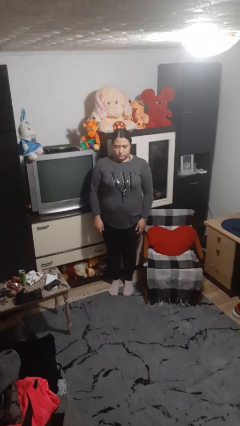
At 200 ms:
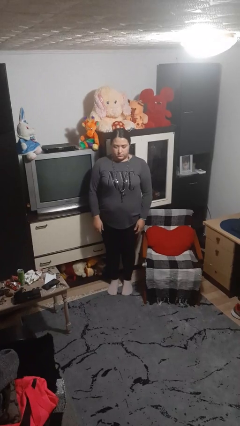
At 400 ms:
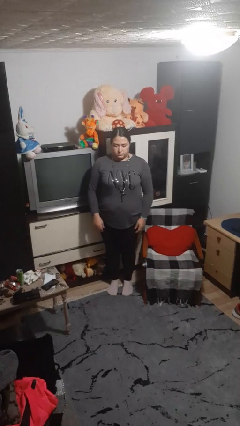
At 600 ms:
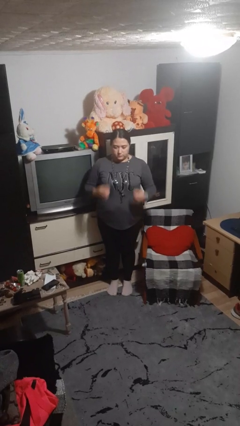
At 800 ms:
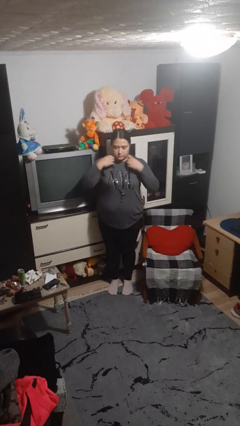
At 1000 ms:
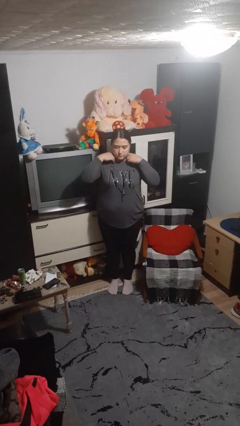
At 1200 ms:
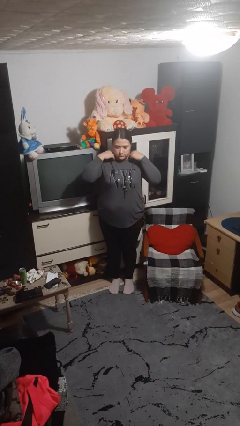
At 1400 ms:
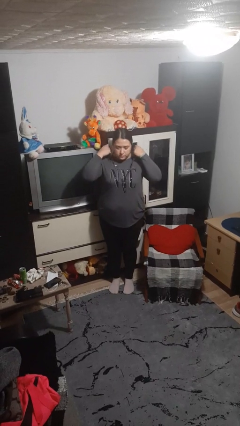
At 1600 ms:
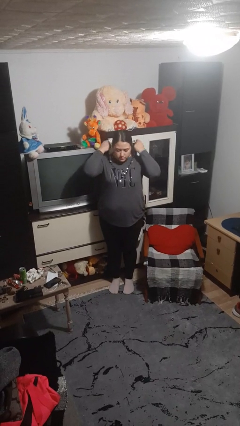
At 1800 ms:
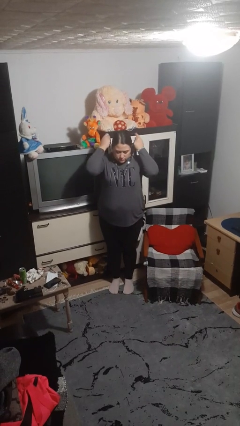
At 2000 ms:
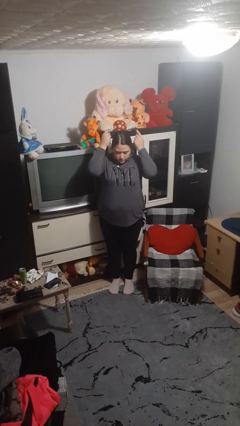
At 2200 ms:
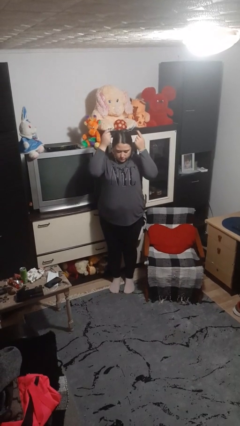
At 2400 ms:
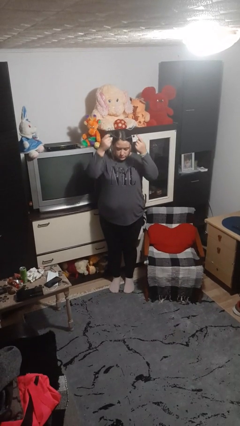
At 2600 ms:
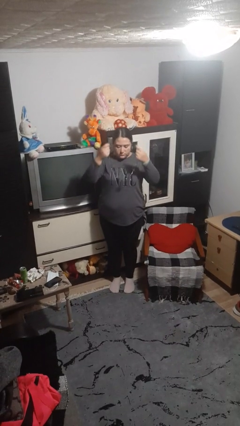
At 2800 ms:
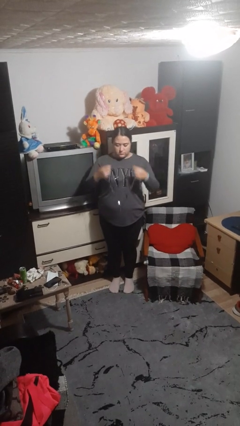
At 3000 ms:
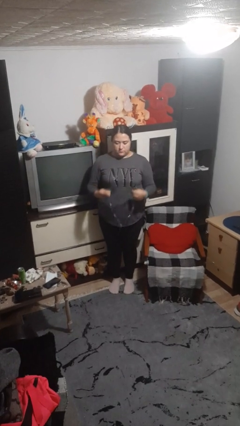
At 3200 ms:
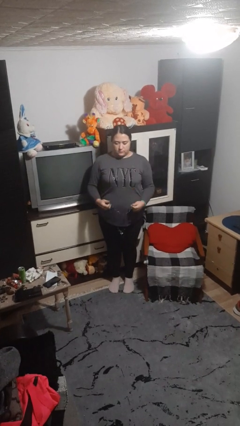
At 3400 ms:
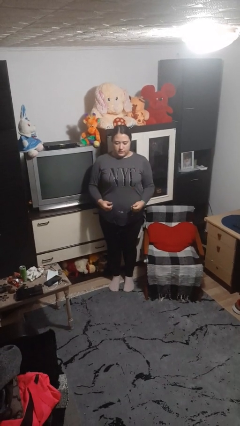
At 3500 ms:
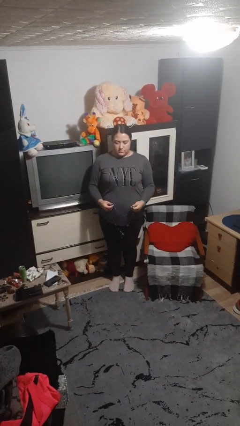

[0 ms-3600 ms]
person takes off necklace

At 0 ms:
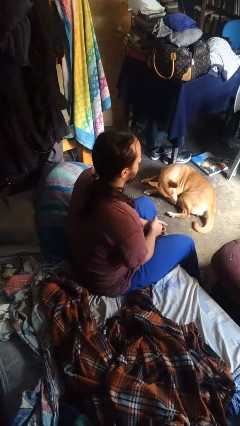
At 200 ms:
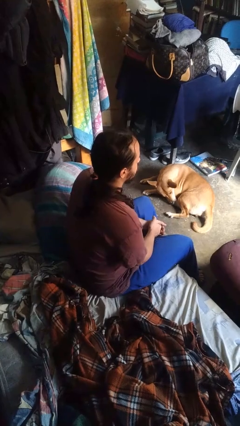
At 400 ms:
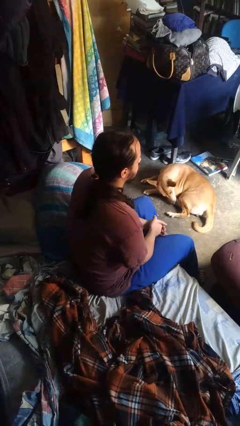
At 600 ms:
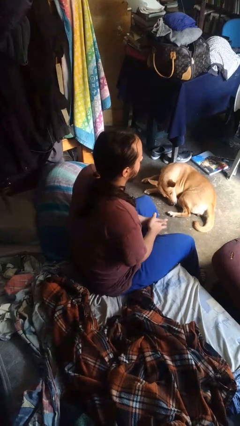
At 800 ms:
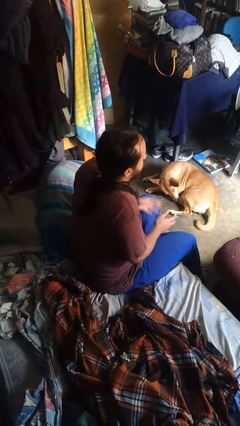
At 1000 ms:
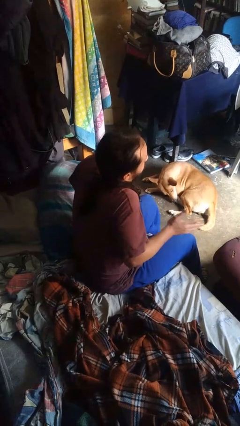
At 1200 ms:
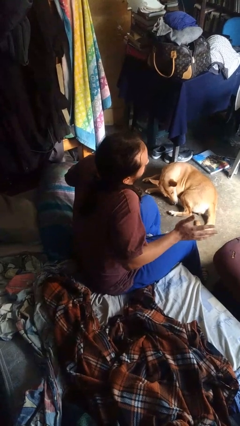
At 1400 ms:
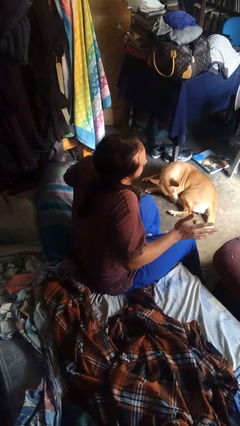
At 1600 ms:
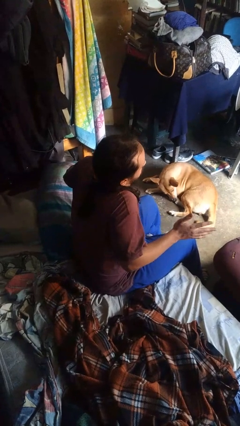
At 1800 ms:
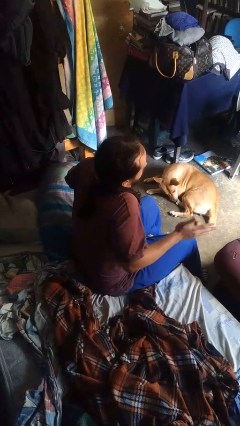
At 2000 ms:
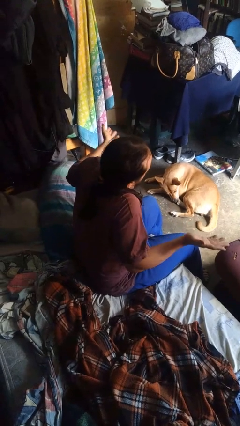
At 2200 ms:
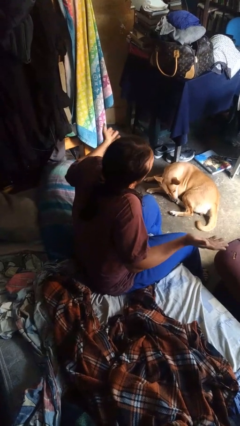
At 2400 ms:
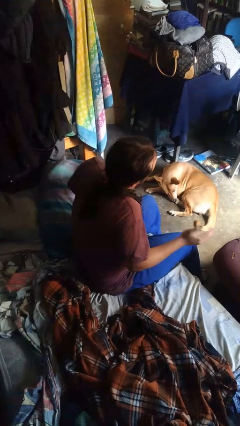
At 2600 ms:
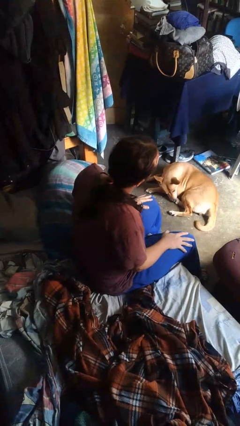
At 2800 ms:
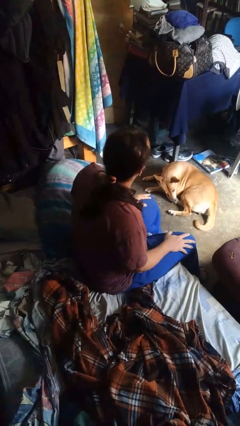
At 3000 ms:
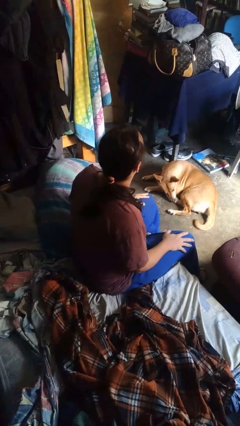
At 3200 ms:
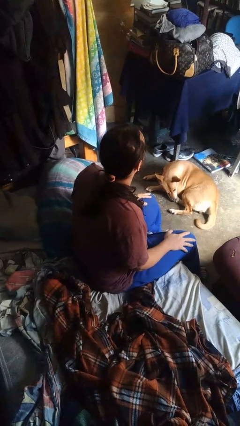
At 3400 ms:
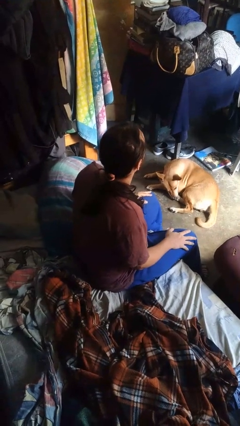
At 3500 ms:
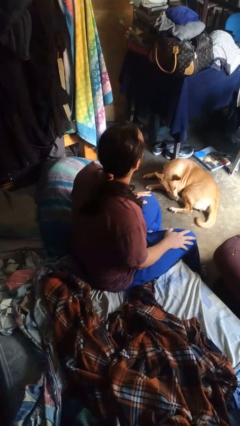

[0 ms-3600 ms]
person shrugs

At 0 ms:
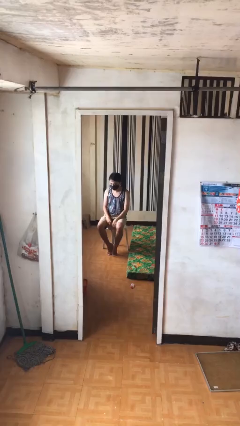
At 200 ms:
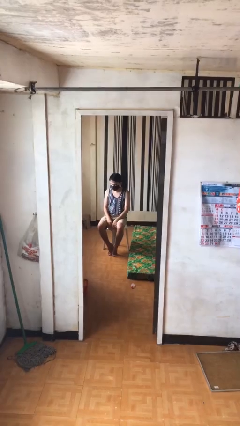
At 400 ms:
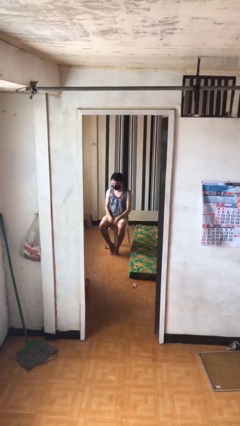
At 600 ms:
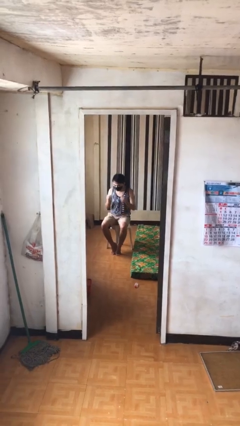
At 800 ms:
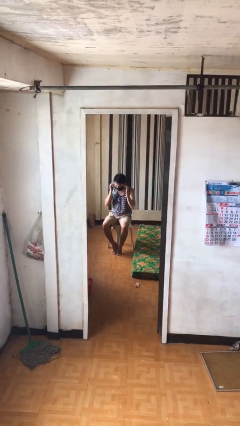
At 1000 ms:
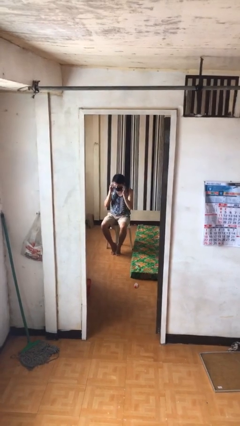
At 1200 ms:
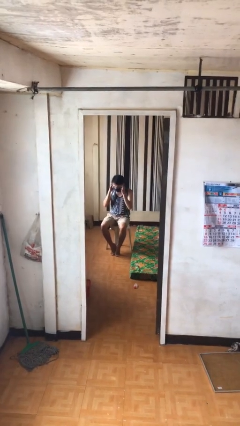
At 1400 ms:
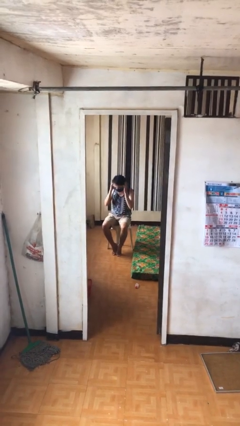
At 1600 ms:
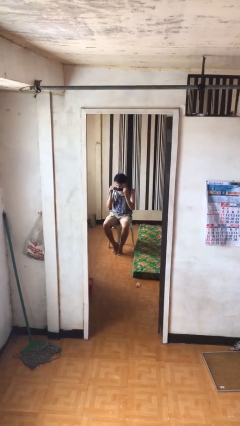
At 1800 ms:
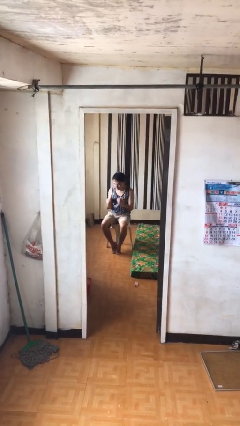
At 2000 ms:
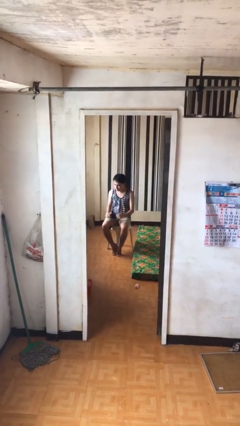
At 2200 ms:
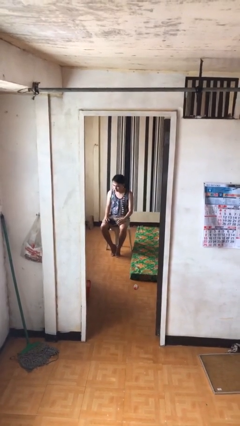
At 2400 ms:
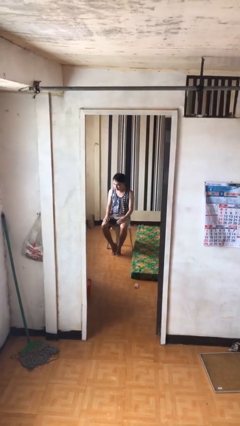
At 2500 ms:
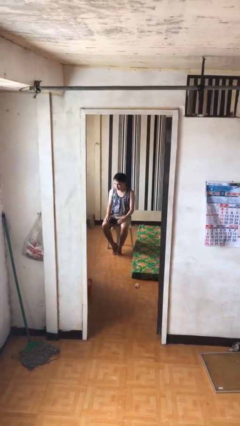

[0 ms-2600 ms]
person takes off facemask

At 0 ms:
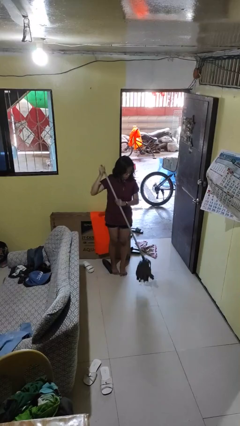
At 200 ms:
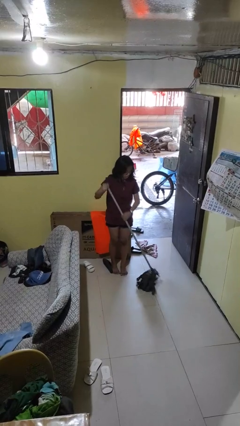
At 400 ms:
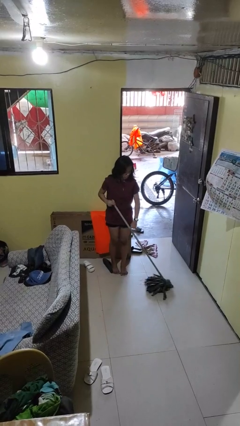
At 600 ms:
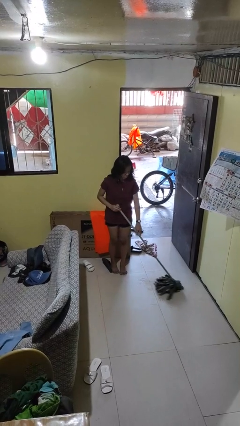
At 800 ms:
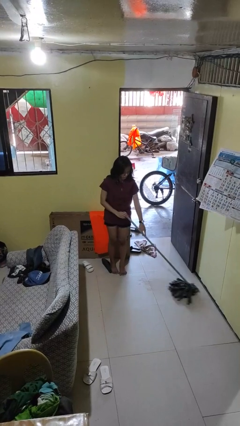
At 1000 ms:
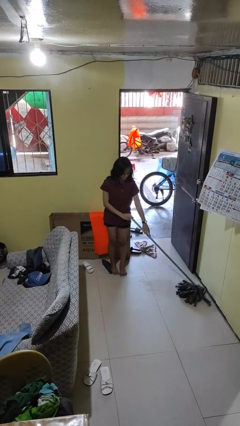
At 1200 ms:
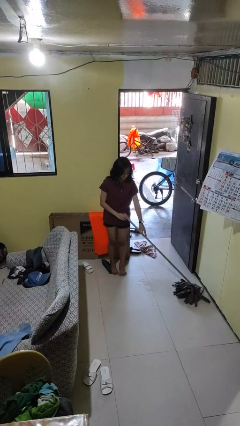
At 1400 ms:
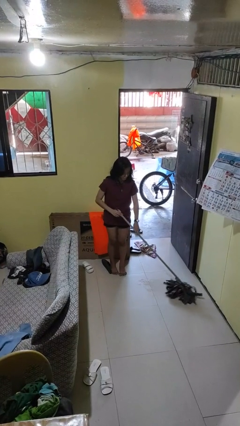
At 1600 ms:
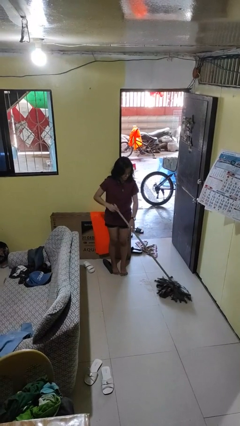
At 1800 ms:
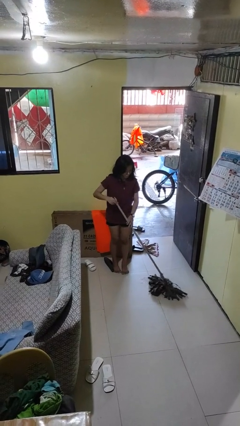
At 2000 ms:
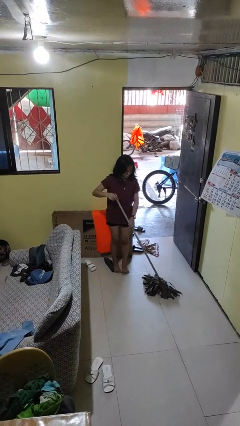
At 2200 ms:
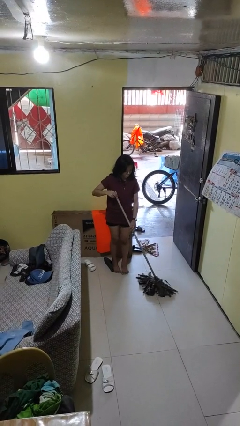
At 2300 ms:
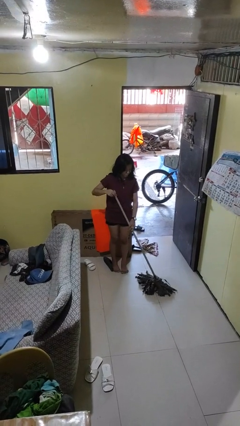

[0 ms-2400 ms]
person mops

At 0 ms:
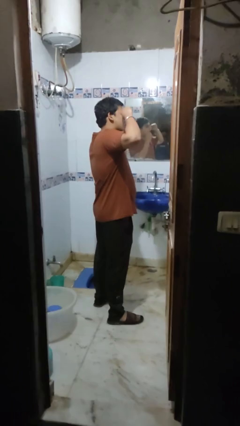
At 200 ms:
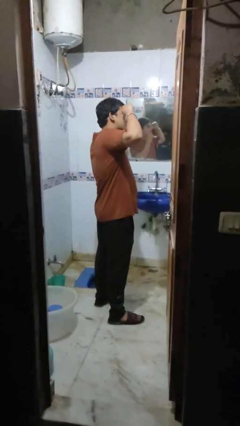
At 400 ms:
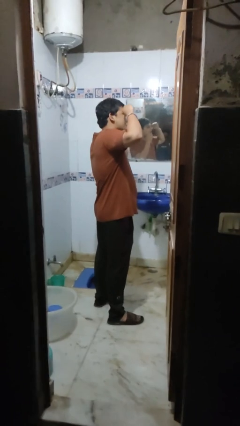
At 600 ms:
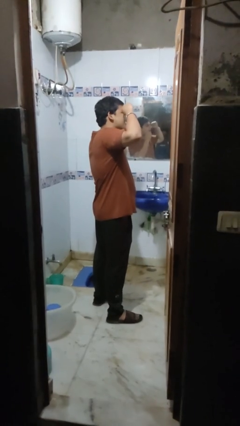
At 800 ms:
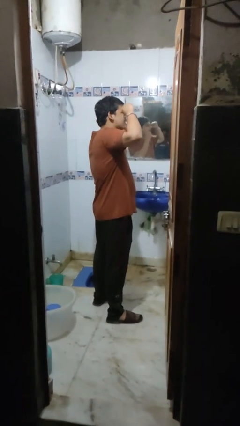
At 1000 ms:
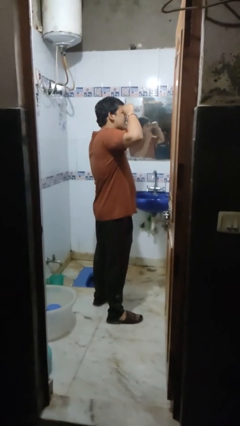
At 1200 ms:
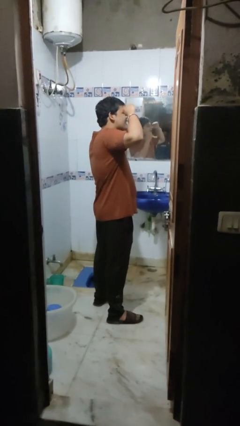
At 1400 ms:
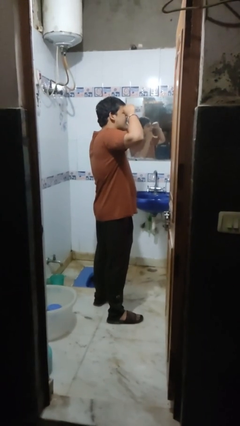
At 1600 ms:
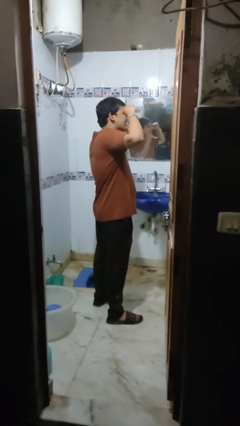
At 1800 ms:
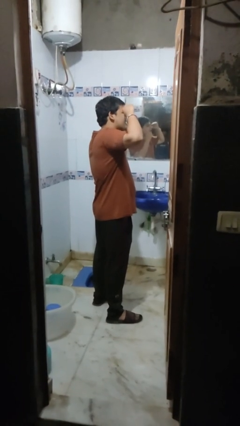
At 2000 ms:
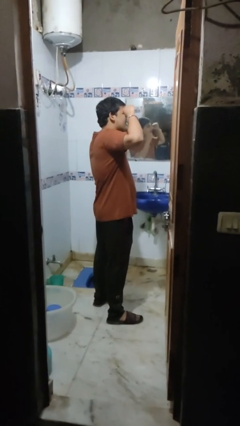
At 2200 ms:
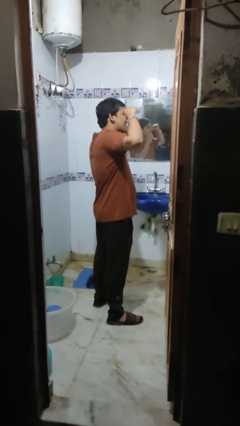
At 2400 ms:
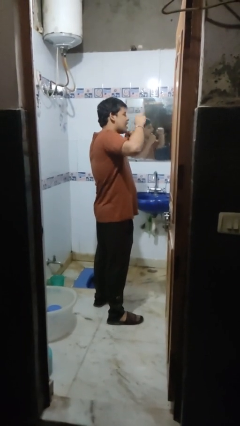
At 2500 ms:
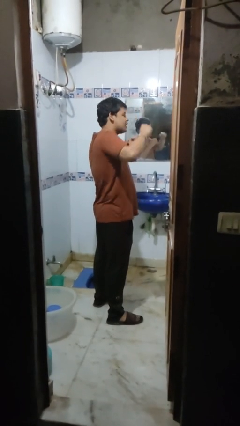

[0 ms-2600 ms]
person flosses

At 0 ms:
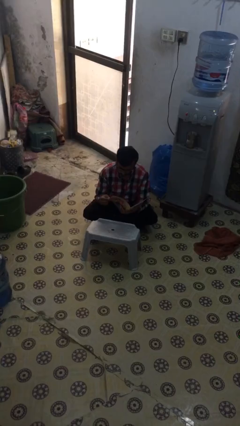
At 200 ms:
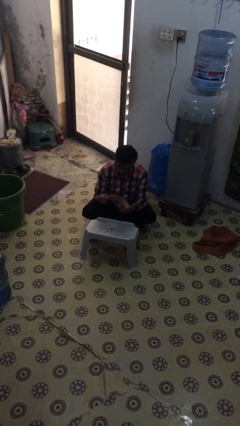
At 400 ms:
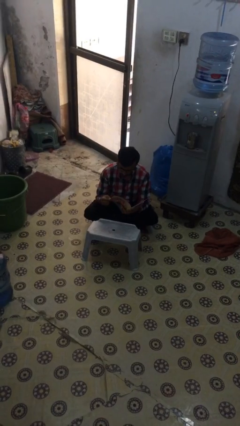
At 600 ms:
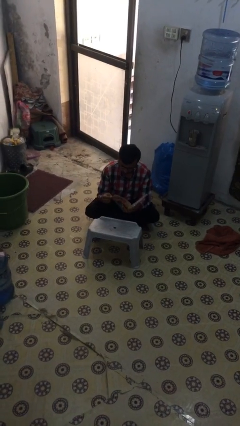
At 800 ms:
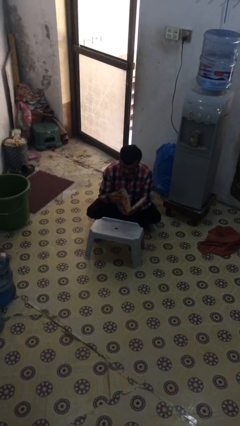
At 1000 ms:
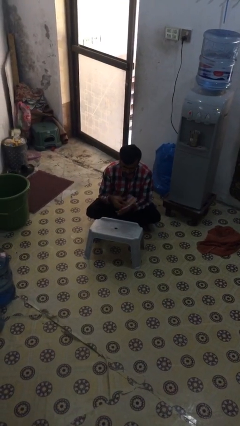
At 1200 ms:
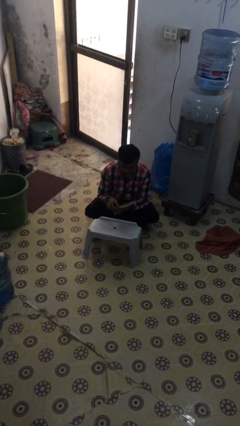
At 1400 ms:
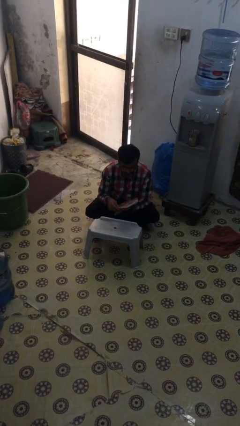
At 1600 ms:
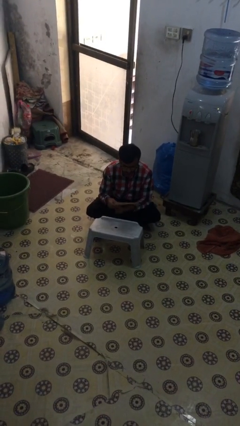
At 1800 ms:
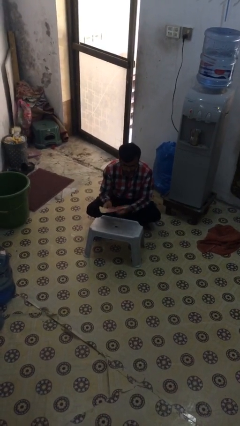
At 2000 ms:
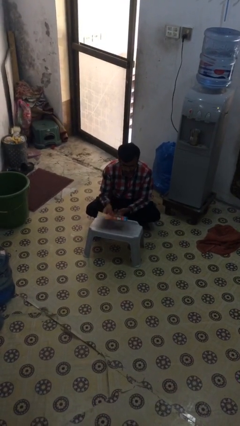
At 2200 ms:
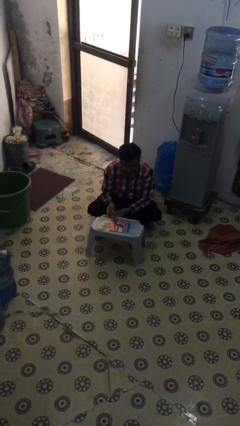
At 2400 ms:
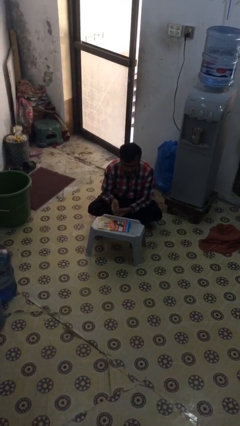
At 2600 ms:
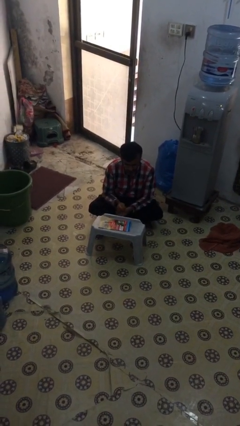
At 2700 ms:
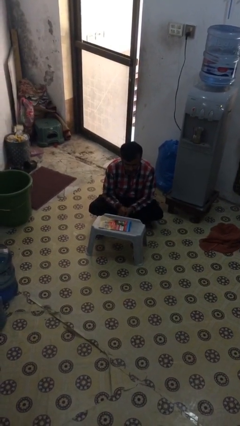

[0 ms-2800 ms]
person puts down object on table
